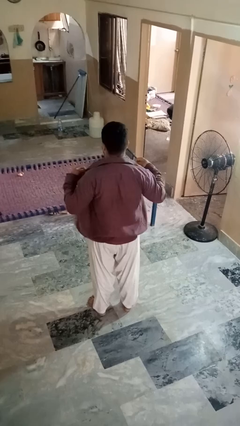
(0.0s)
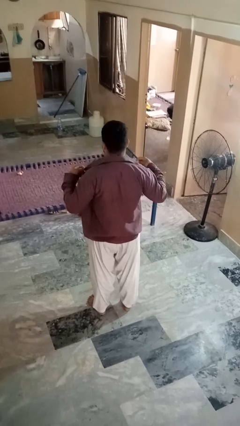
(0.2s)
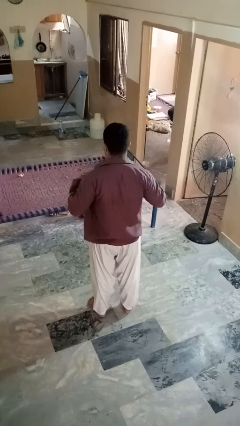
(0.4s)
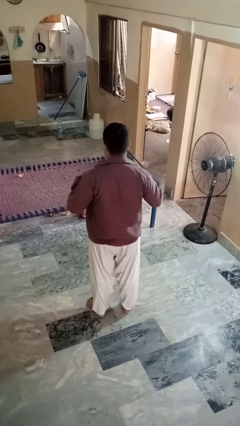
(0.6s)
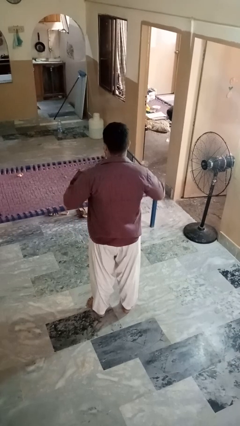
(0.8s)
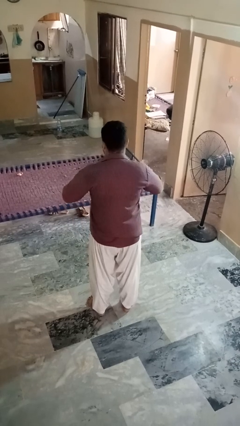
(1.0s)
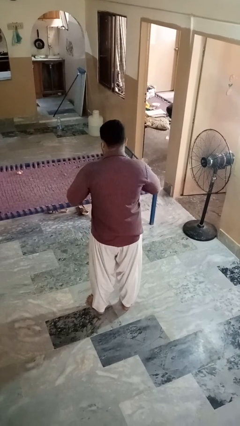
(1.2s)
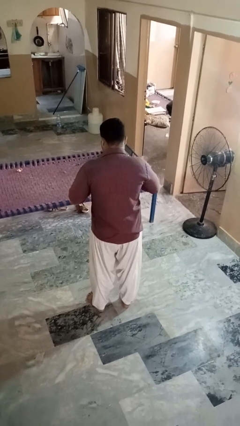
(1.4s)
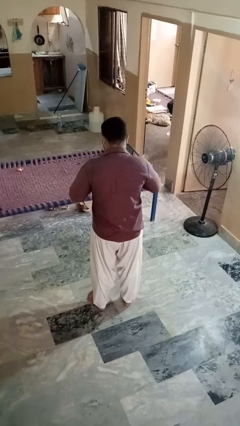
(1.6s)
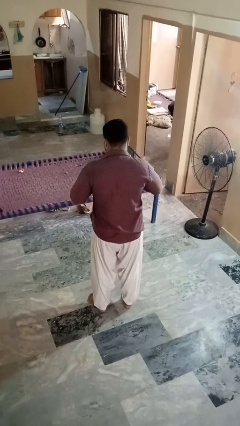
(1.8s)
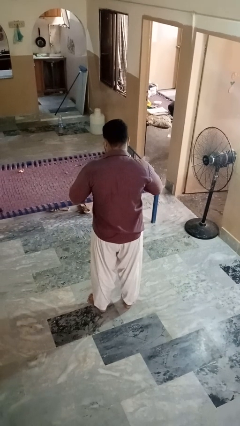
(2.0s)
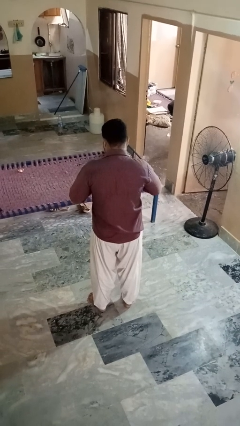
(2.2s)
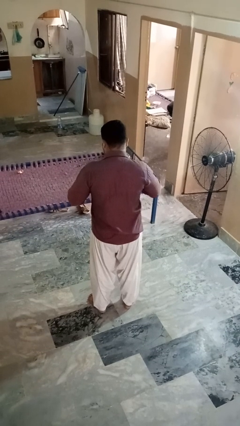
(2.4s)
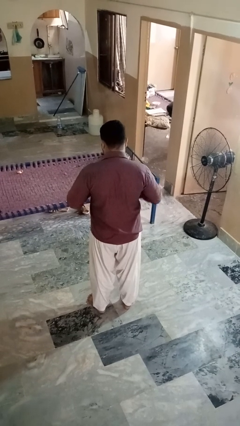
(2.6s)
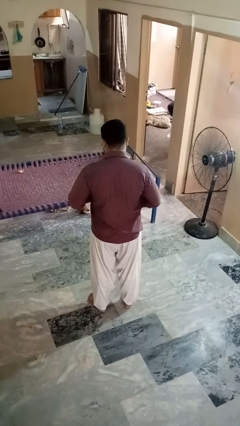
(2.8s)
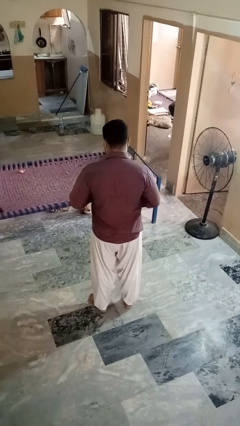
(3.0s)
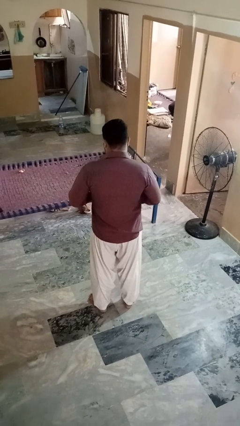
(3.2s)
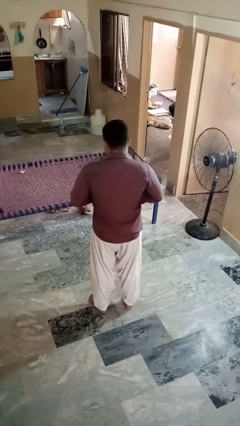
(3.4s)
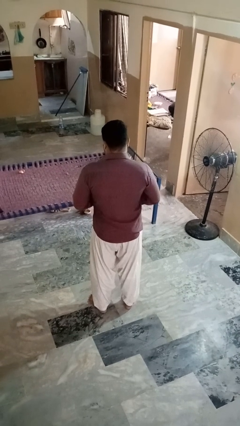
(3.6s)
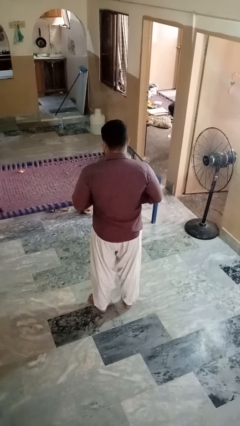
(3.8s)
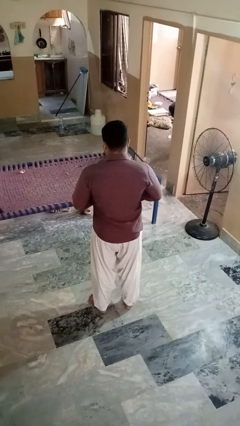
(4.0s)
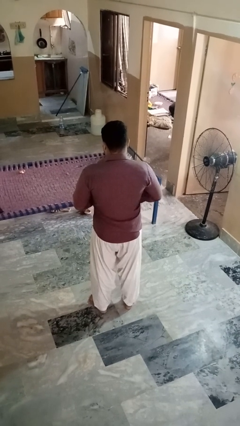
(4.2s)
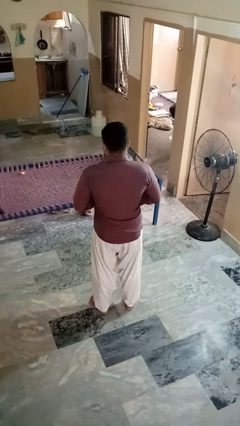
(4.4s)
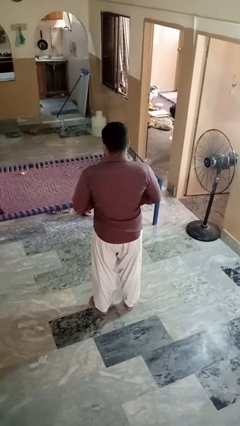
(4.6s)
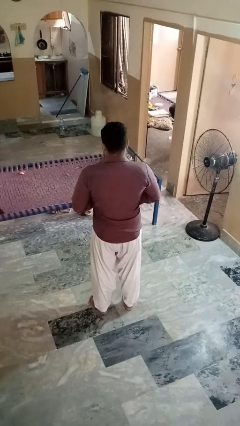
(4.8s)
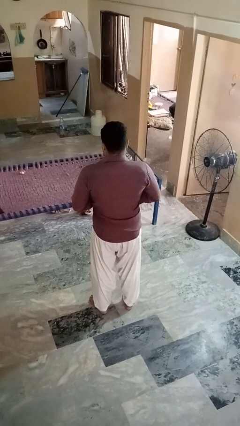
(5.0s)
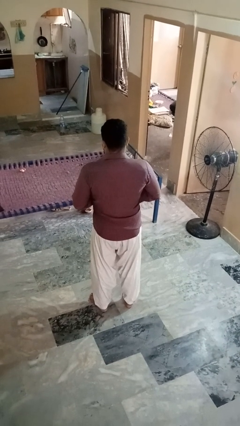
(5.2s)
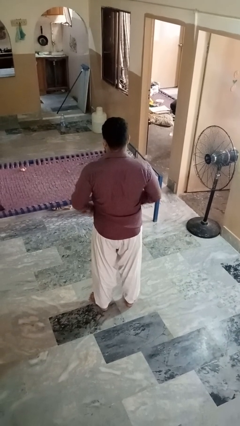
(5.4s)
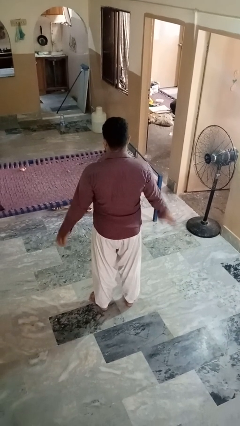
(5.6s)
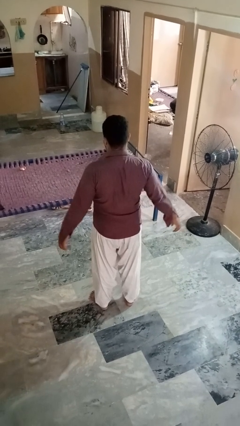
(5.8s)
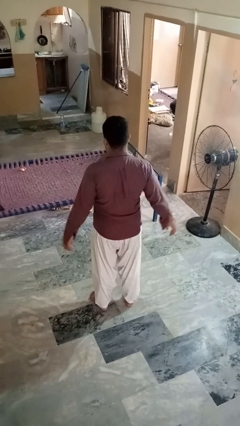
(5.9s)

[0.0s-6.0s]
person buttons shirt

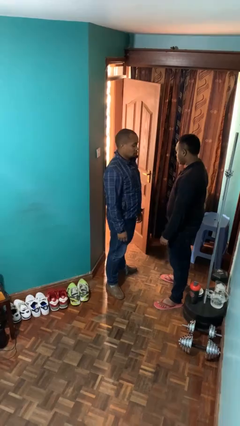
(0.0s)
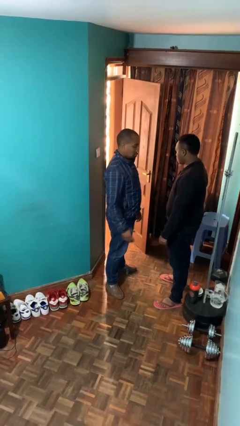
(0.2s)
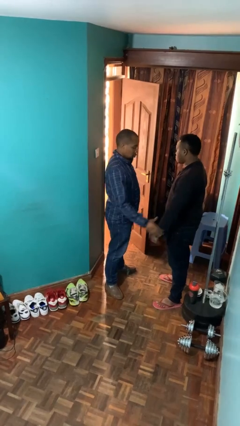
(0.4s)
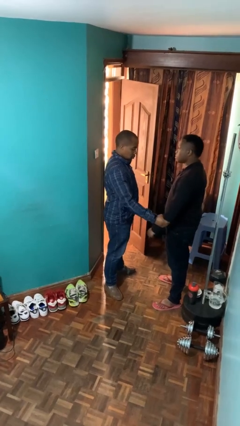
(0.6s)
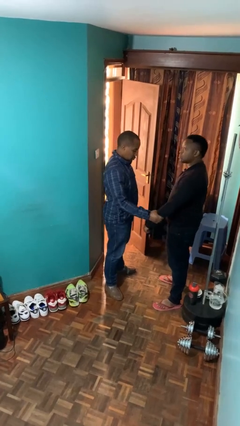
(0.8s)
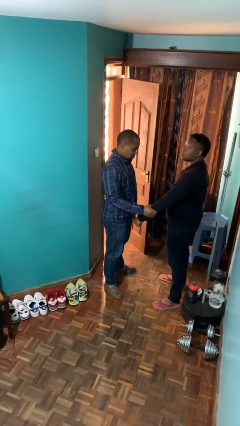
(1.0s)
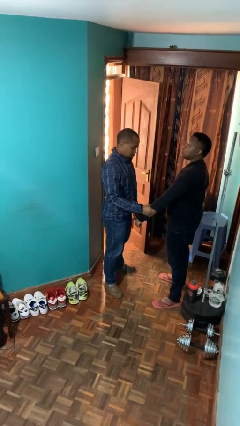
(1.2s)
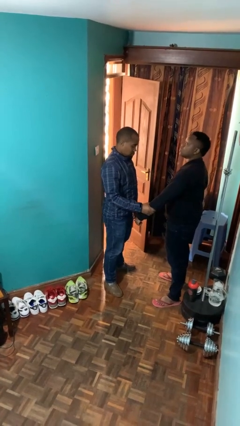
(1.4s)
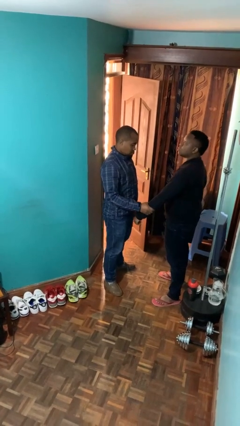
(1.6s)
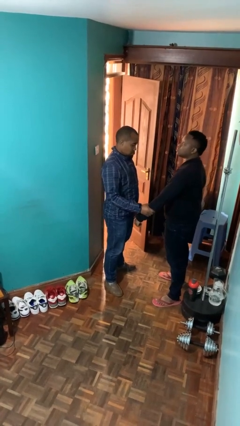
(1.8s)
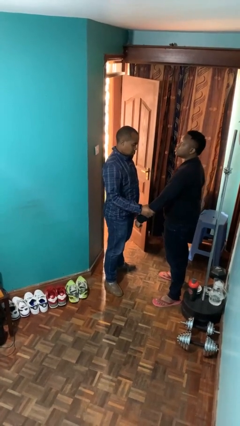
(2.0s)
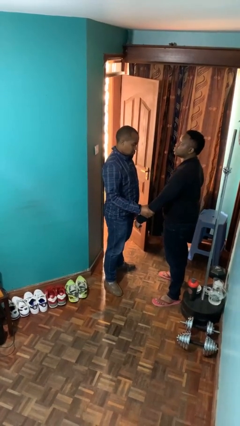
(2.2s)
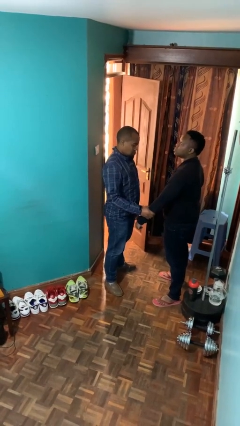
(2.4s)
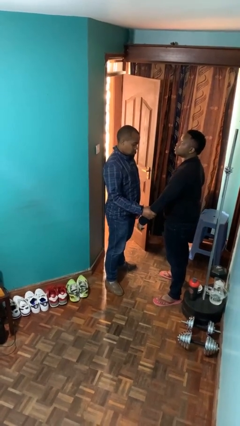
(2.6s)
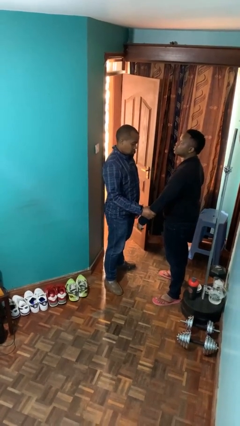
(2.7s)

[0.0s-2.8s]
person grabs person by forearm

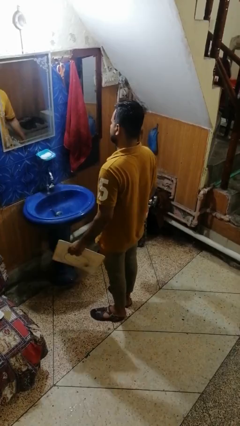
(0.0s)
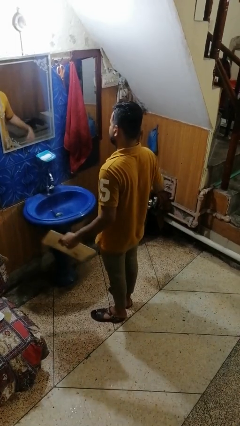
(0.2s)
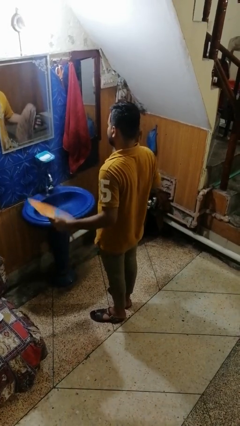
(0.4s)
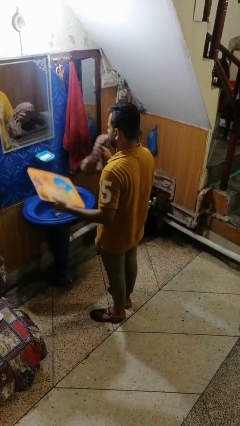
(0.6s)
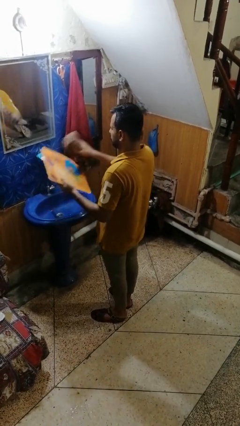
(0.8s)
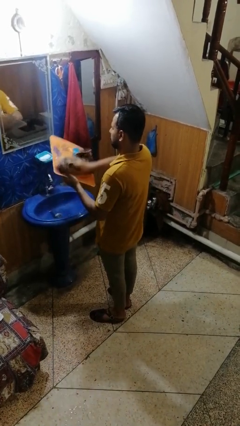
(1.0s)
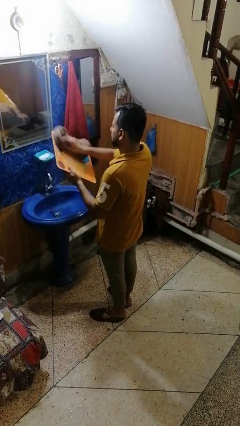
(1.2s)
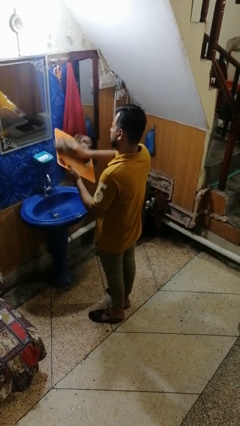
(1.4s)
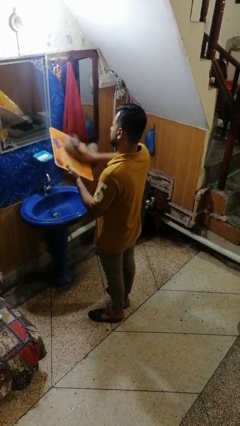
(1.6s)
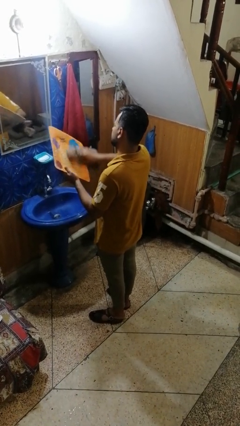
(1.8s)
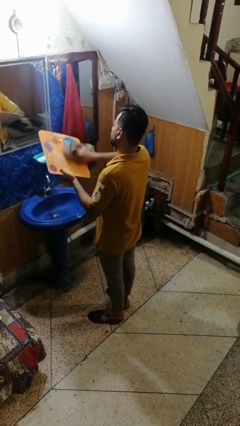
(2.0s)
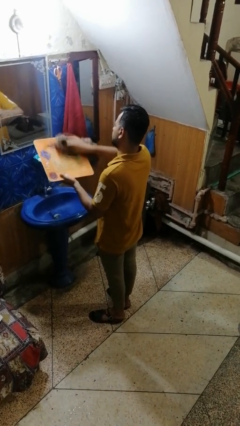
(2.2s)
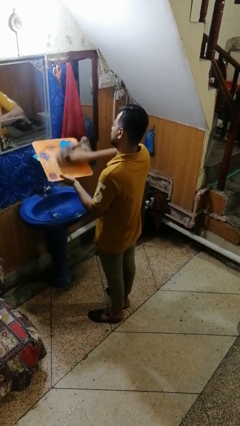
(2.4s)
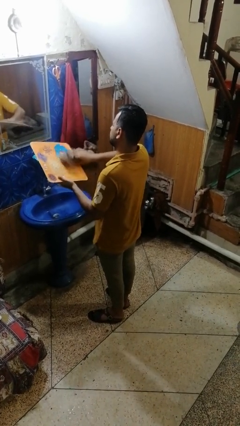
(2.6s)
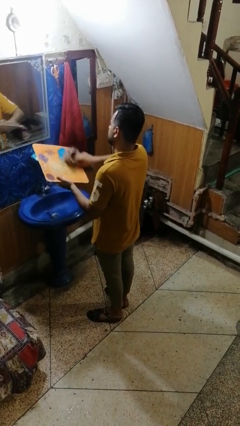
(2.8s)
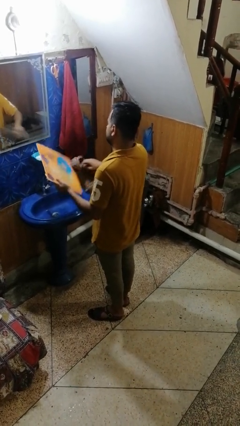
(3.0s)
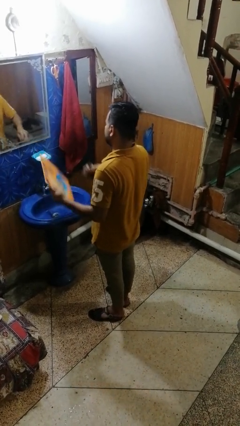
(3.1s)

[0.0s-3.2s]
person dries dish

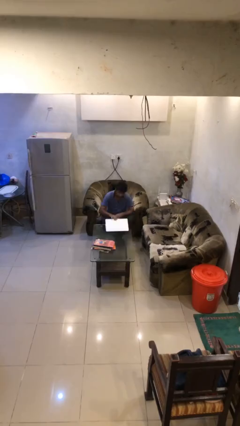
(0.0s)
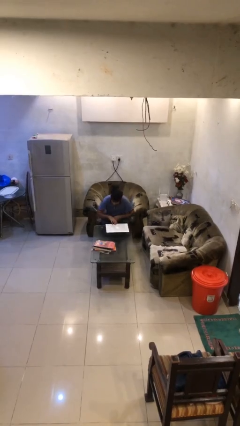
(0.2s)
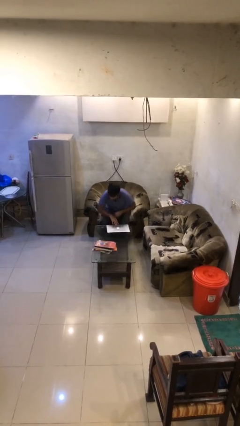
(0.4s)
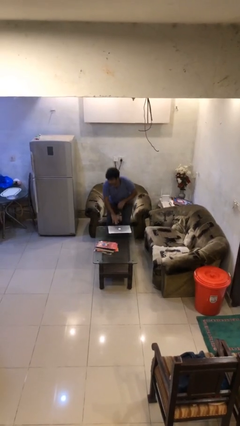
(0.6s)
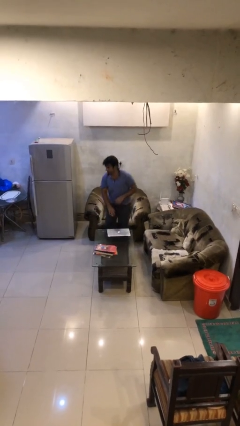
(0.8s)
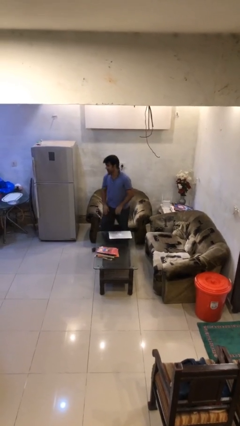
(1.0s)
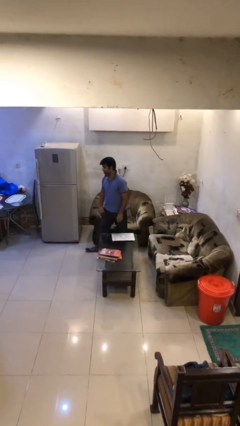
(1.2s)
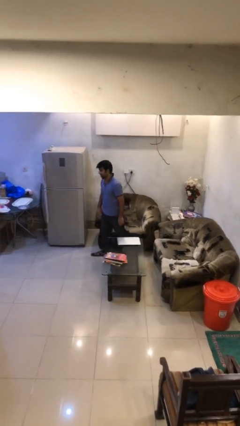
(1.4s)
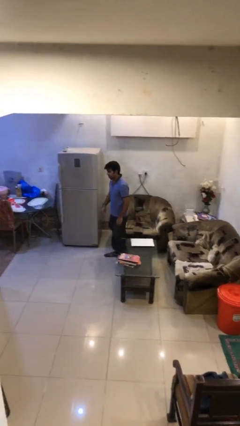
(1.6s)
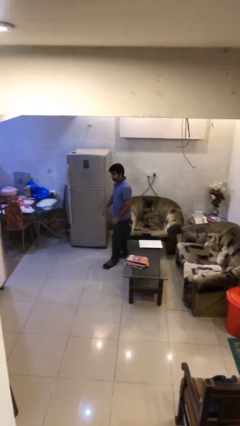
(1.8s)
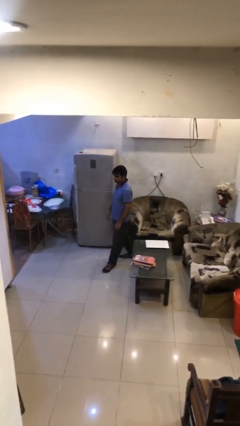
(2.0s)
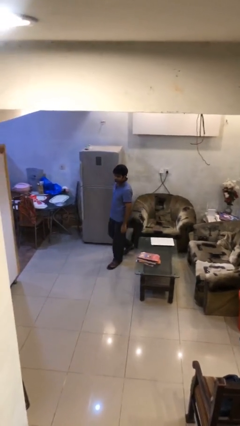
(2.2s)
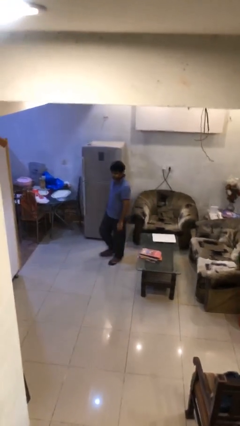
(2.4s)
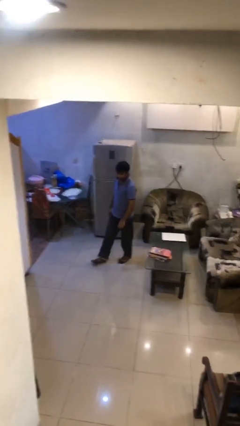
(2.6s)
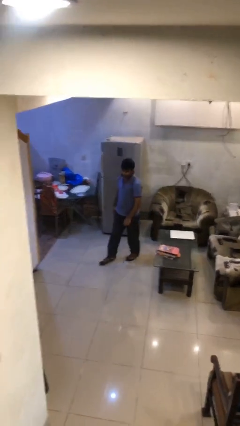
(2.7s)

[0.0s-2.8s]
person stands up

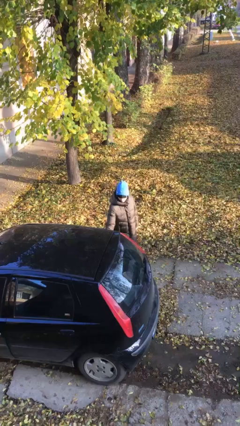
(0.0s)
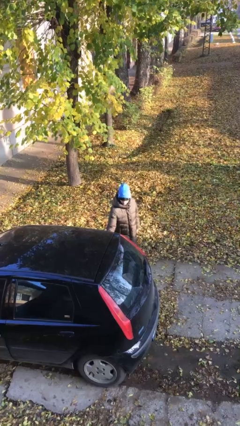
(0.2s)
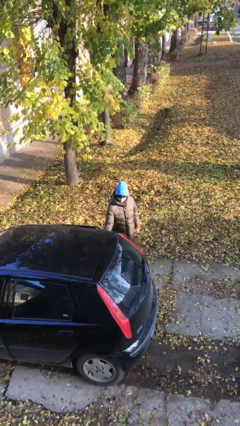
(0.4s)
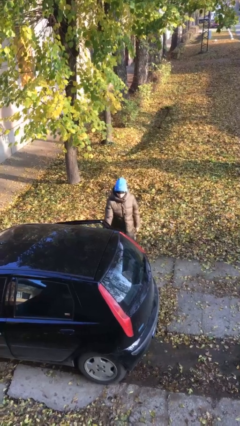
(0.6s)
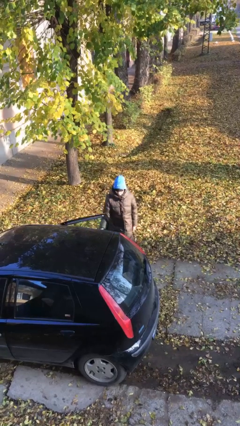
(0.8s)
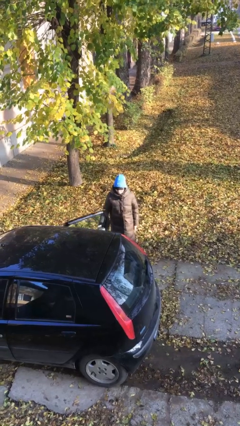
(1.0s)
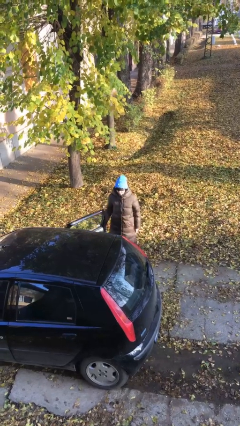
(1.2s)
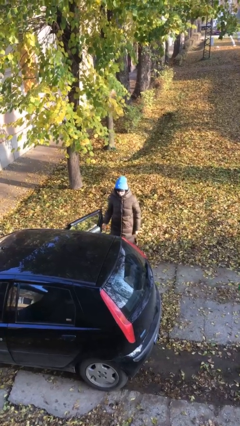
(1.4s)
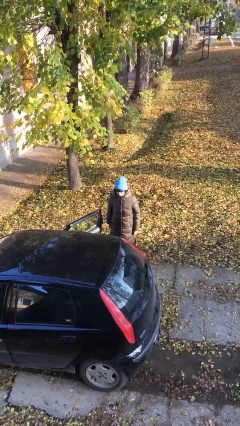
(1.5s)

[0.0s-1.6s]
person opens car door

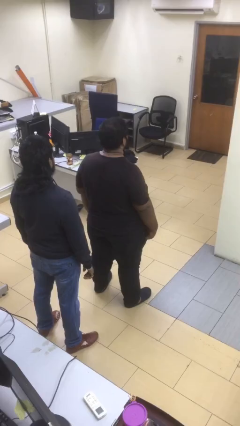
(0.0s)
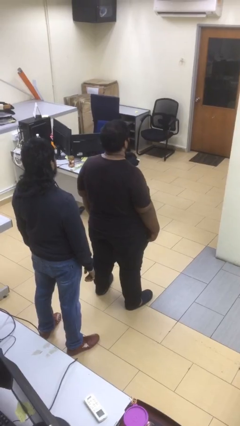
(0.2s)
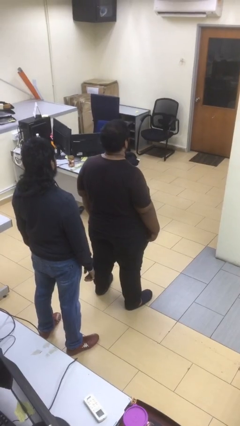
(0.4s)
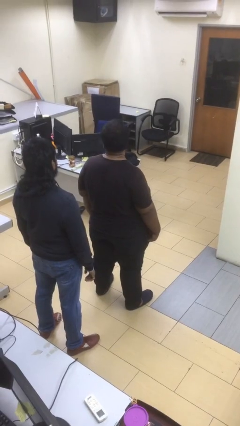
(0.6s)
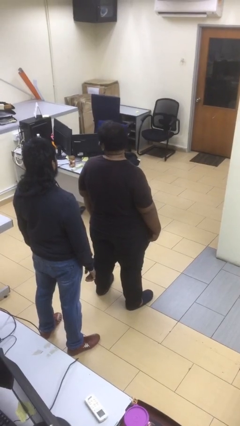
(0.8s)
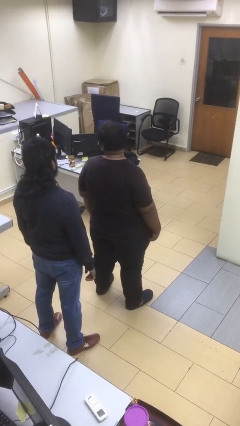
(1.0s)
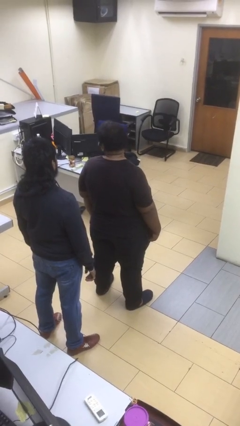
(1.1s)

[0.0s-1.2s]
person looks over shoulder
